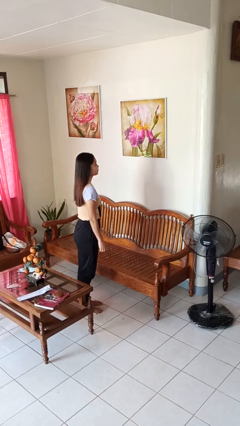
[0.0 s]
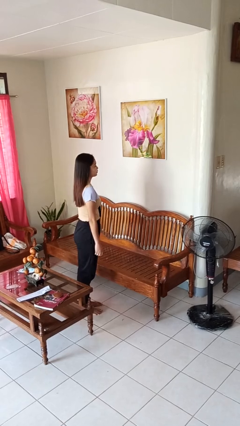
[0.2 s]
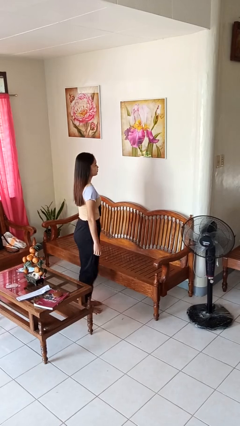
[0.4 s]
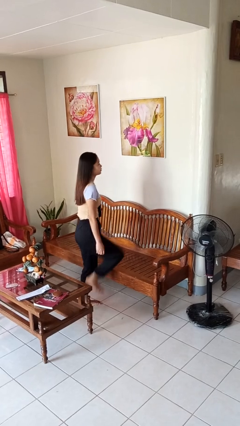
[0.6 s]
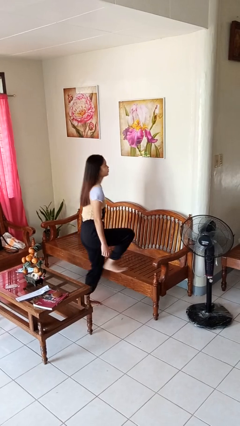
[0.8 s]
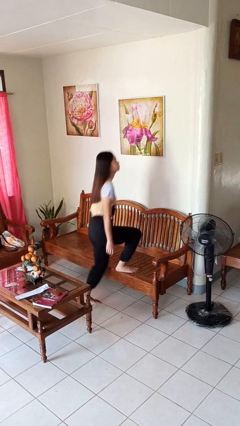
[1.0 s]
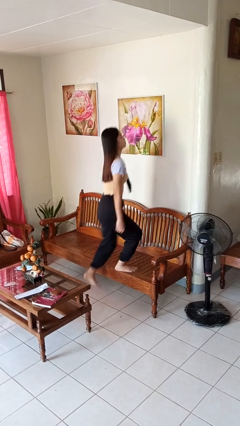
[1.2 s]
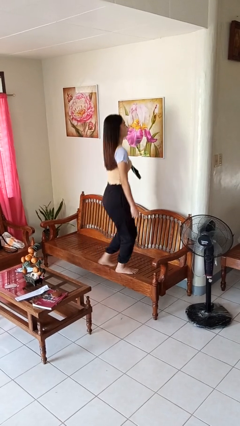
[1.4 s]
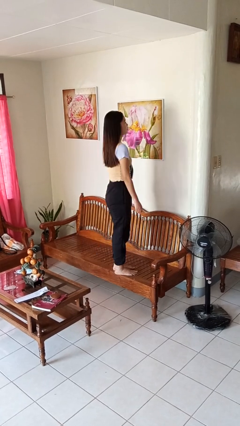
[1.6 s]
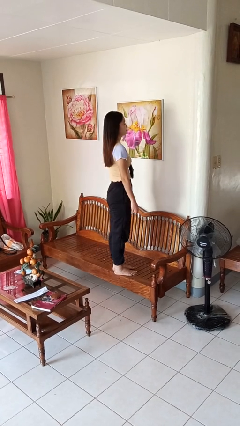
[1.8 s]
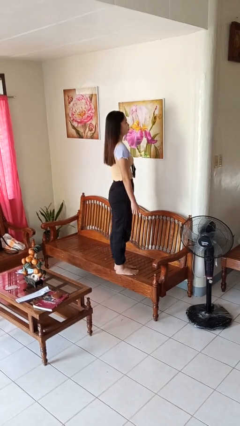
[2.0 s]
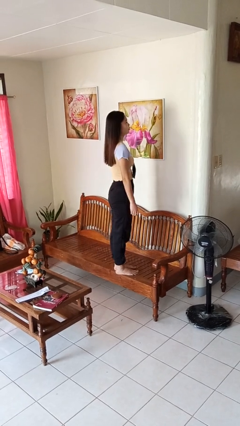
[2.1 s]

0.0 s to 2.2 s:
person climbs on chair

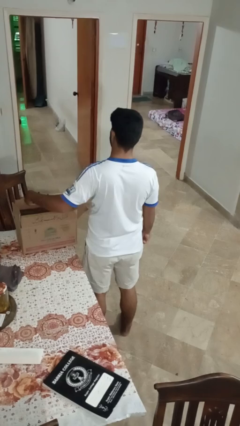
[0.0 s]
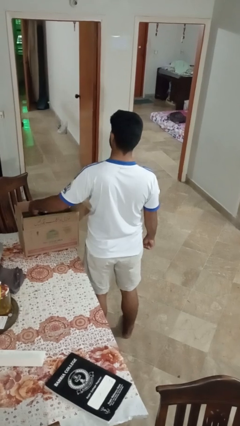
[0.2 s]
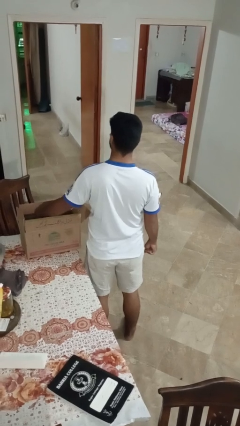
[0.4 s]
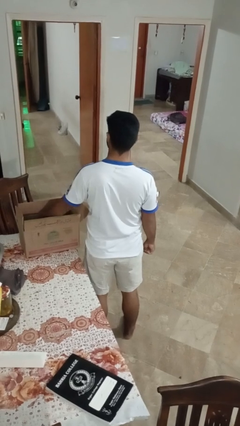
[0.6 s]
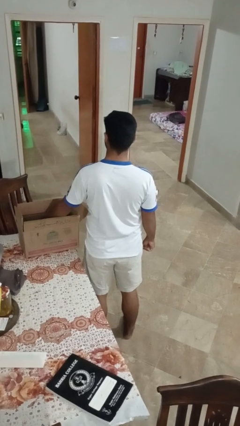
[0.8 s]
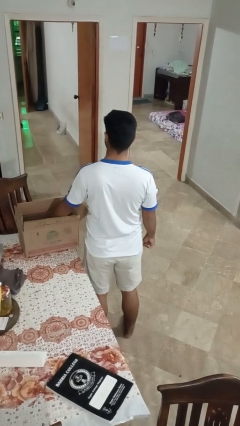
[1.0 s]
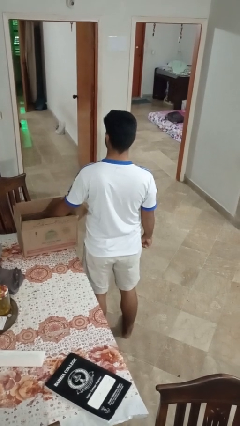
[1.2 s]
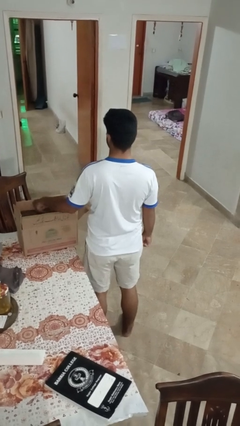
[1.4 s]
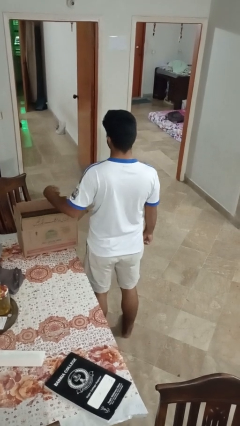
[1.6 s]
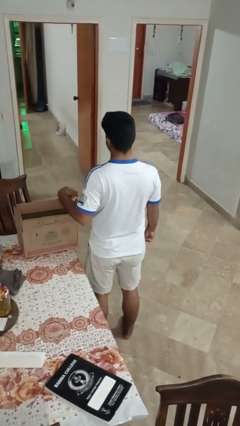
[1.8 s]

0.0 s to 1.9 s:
person puts object into box

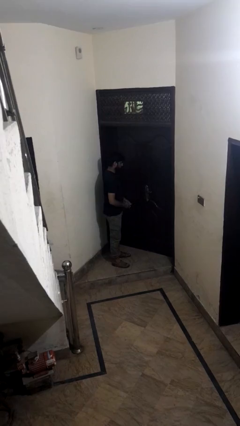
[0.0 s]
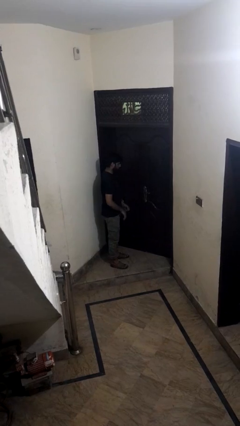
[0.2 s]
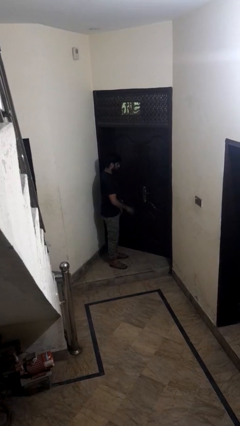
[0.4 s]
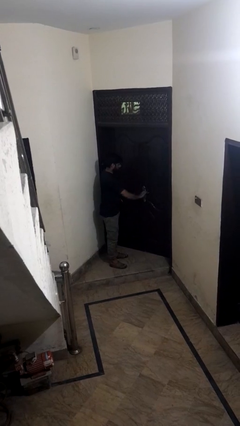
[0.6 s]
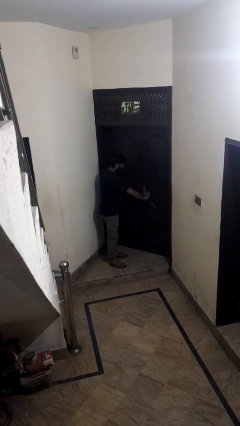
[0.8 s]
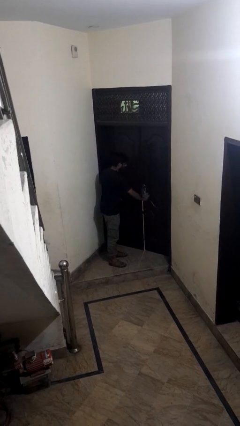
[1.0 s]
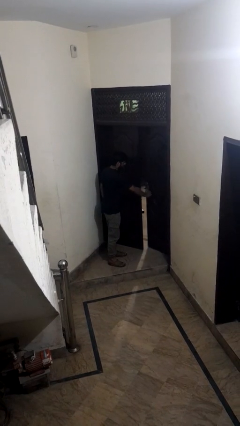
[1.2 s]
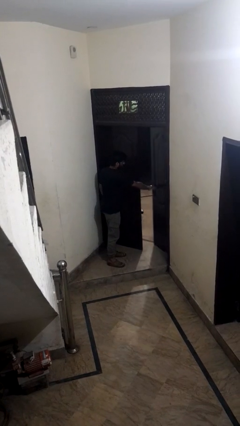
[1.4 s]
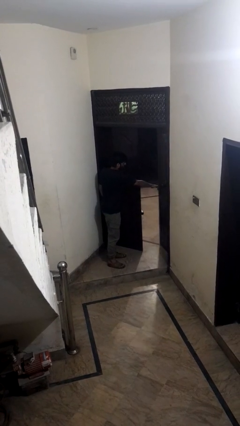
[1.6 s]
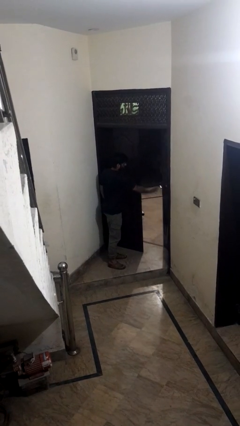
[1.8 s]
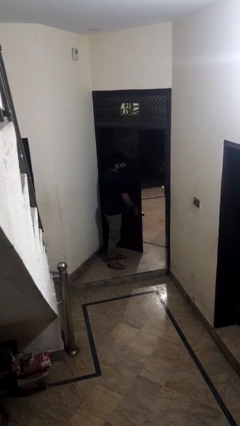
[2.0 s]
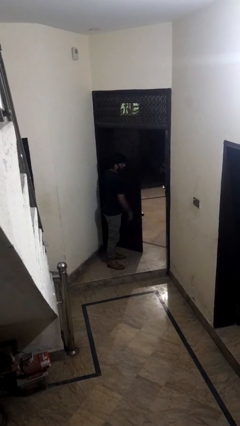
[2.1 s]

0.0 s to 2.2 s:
person opens facility door

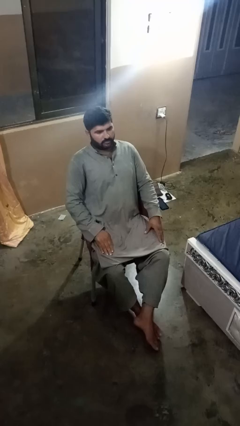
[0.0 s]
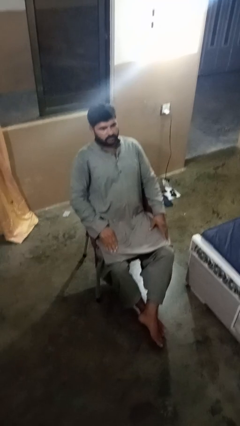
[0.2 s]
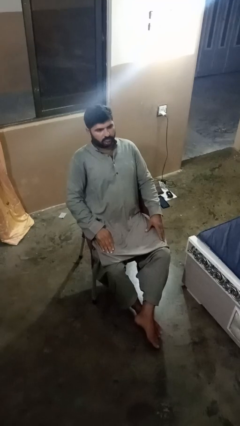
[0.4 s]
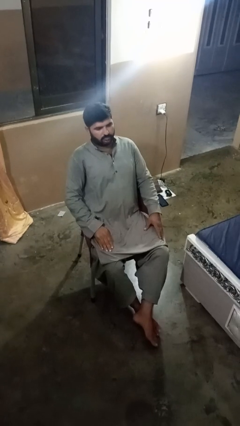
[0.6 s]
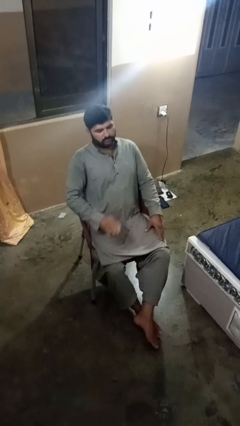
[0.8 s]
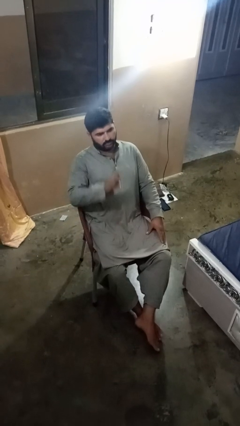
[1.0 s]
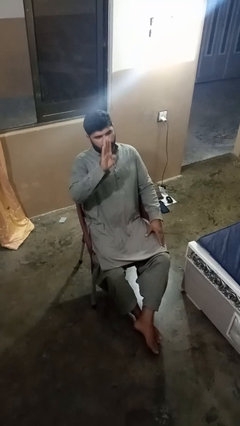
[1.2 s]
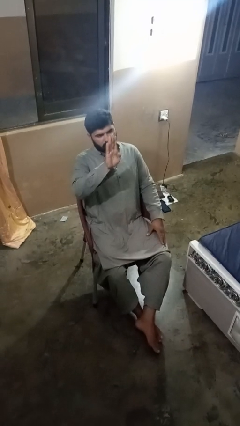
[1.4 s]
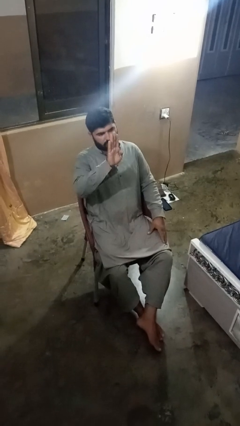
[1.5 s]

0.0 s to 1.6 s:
person gestures number four

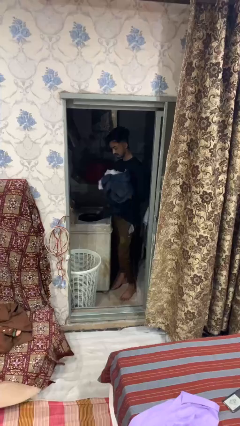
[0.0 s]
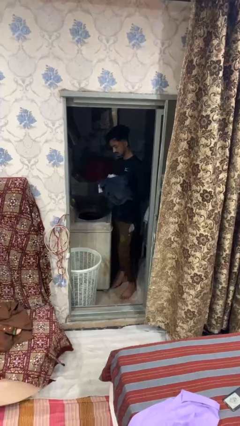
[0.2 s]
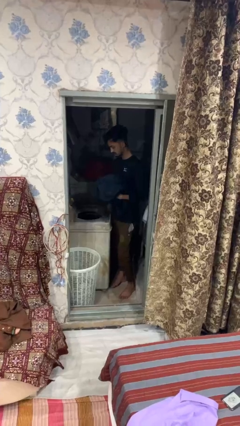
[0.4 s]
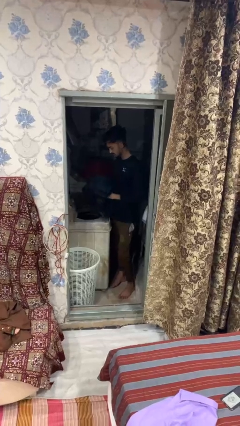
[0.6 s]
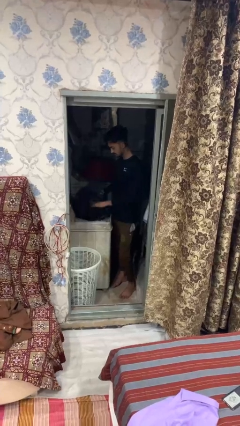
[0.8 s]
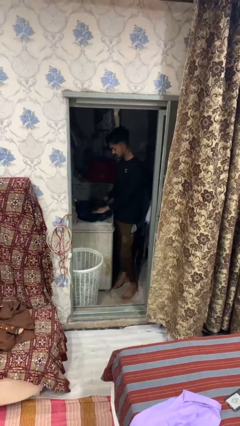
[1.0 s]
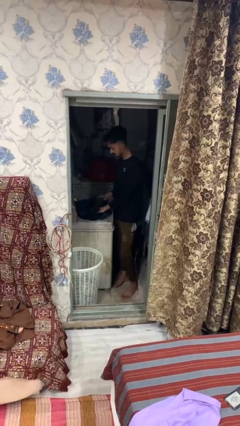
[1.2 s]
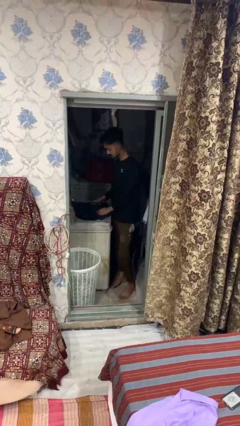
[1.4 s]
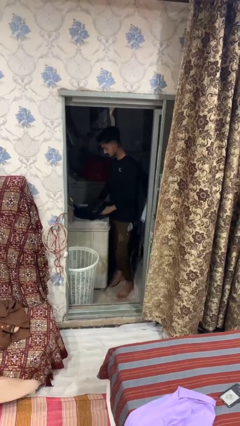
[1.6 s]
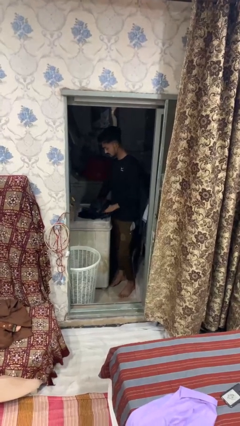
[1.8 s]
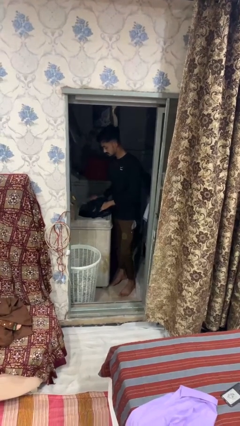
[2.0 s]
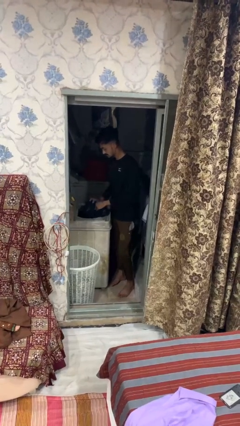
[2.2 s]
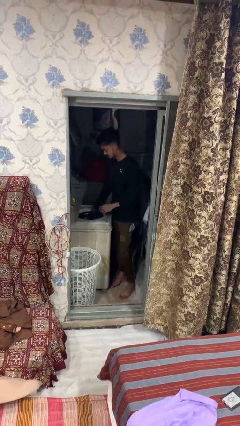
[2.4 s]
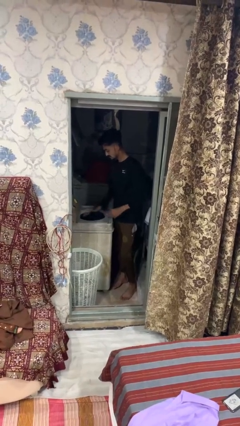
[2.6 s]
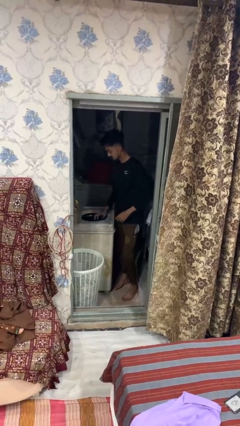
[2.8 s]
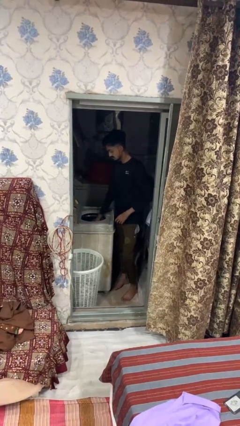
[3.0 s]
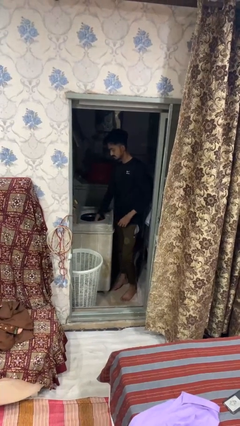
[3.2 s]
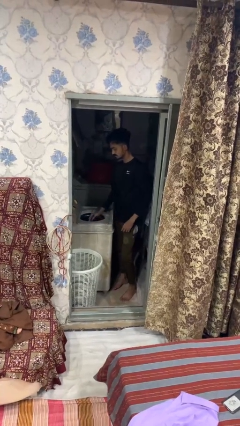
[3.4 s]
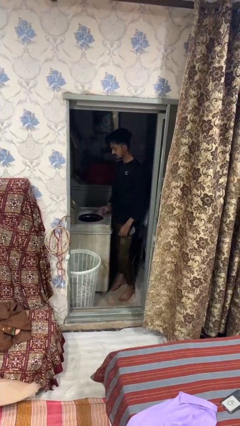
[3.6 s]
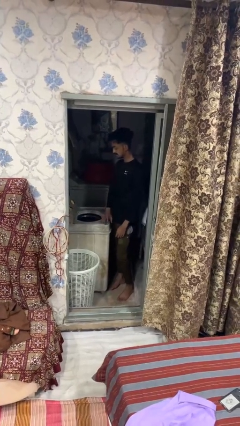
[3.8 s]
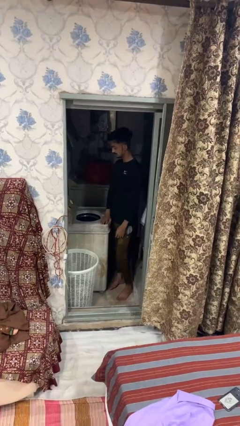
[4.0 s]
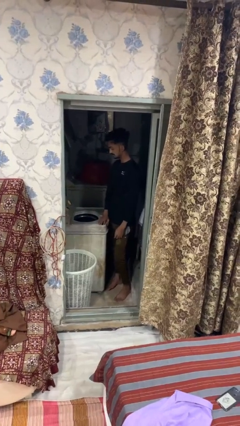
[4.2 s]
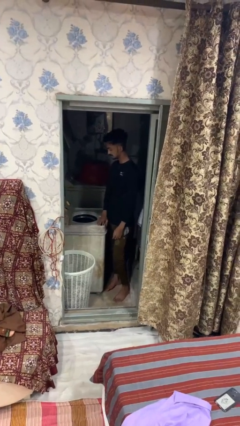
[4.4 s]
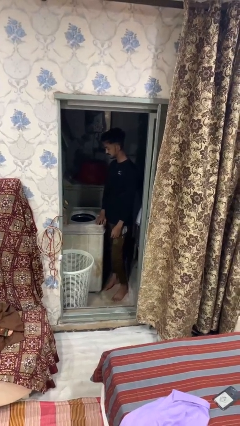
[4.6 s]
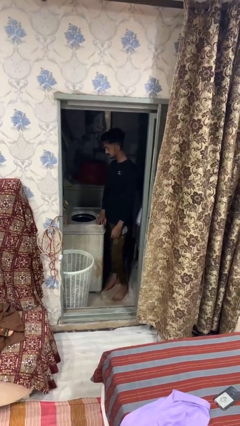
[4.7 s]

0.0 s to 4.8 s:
person loads clotheswasher

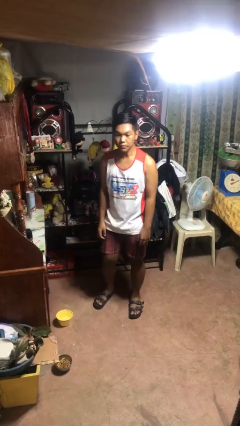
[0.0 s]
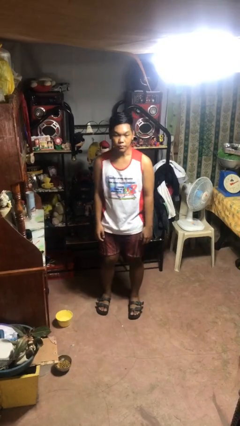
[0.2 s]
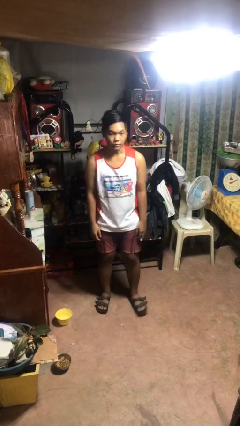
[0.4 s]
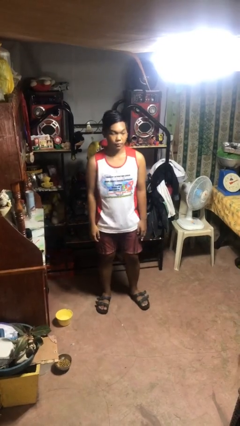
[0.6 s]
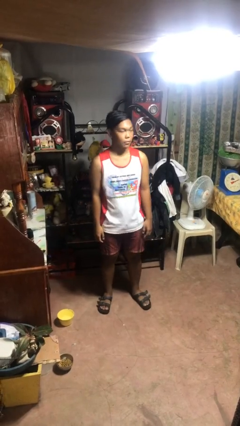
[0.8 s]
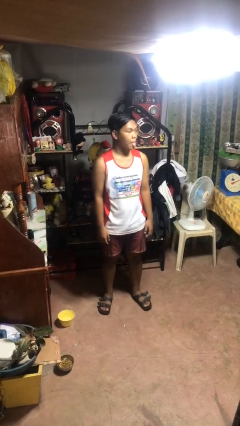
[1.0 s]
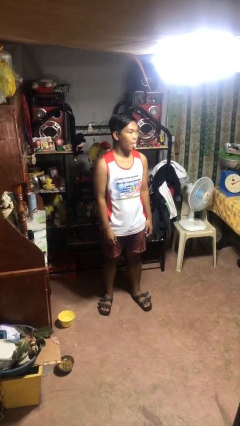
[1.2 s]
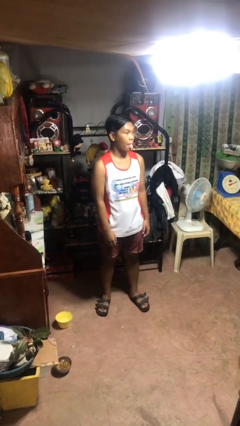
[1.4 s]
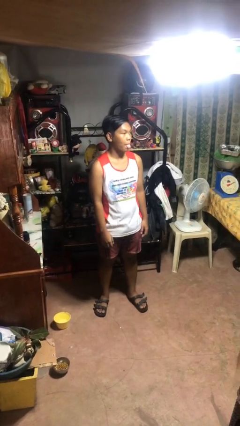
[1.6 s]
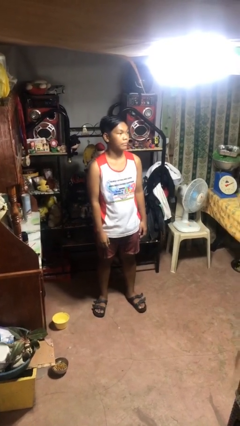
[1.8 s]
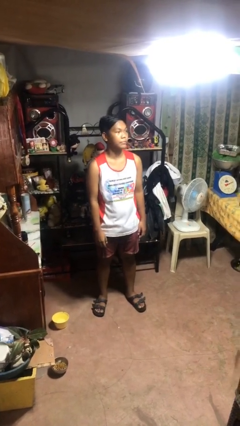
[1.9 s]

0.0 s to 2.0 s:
person sticks out tongue

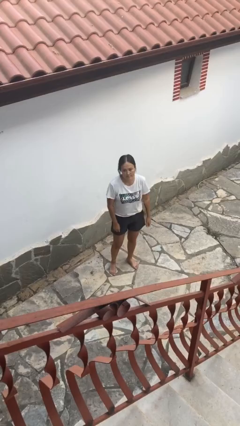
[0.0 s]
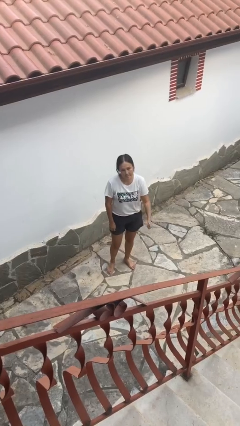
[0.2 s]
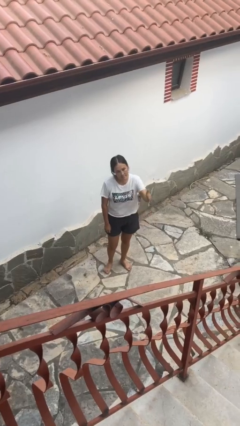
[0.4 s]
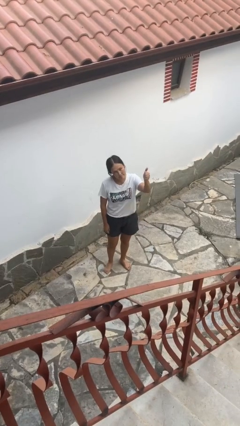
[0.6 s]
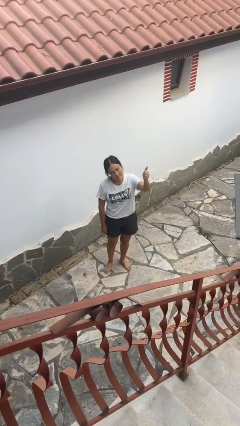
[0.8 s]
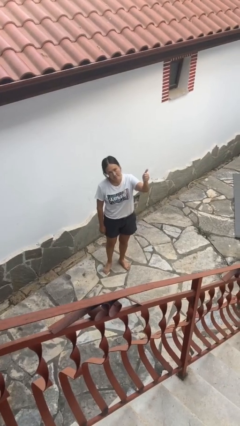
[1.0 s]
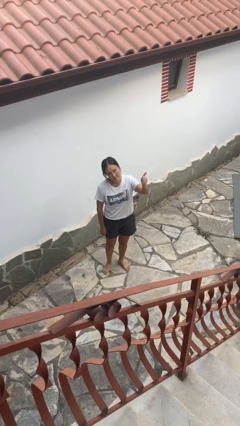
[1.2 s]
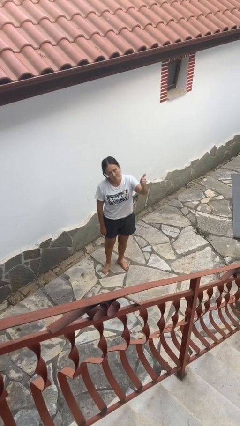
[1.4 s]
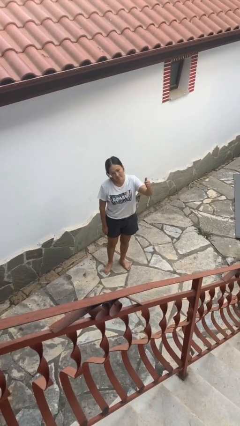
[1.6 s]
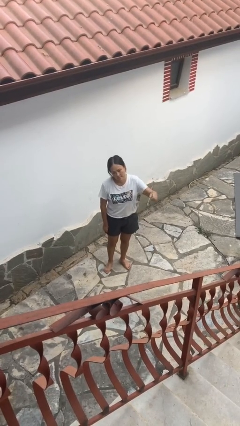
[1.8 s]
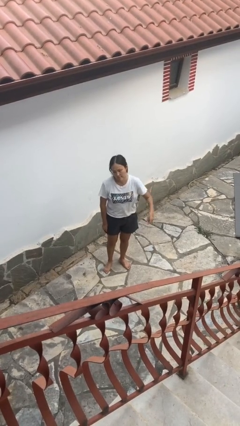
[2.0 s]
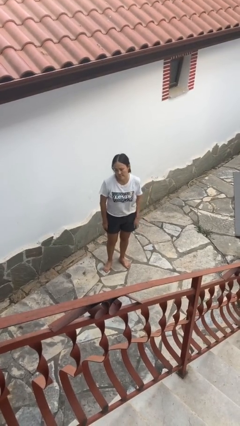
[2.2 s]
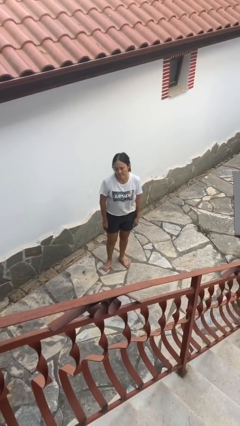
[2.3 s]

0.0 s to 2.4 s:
person gestures thumbs up
